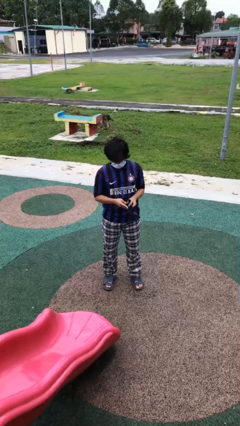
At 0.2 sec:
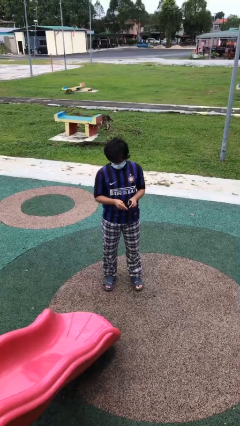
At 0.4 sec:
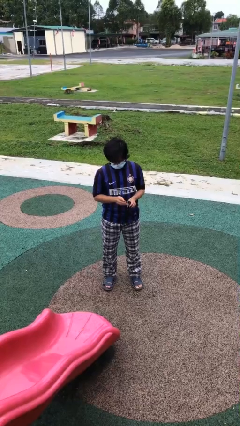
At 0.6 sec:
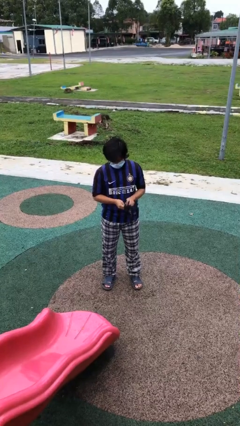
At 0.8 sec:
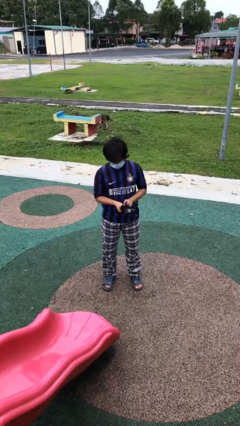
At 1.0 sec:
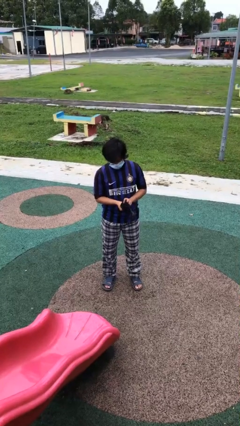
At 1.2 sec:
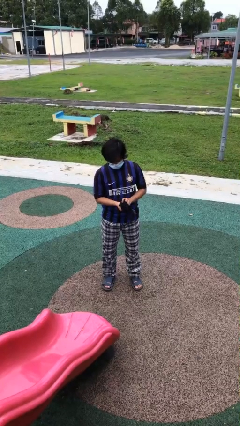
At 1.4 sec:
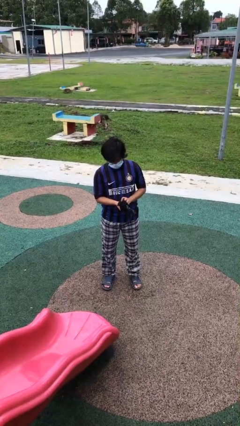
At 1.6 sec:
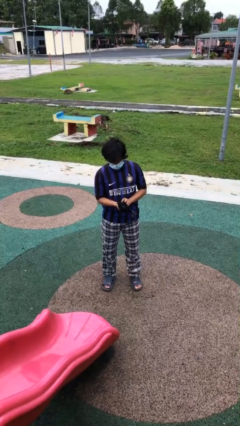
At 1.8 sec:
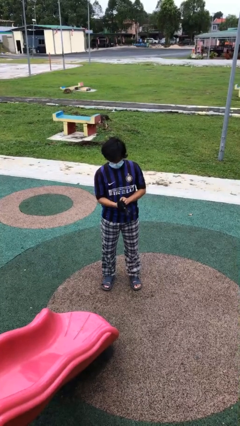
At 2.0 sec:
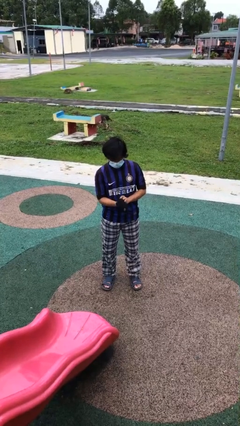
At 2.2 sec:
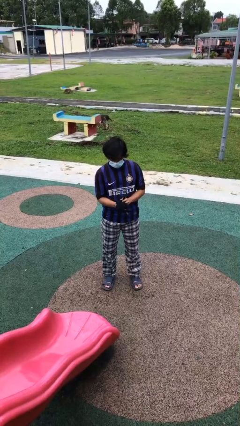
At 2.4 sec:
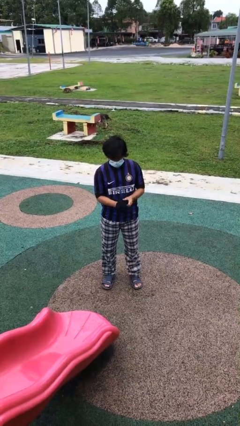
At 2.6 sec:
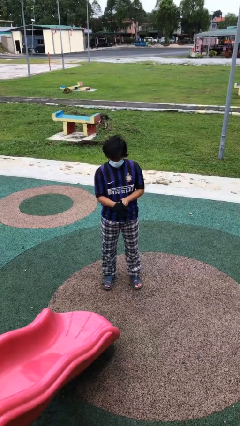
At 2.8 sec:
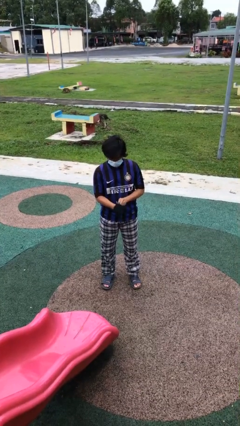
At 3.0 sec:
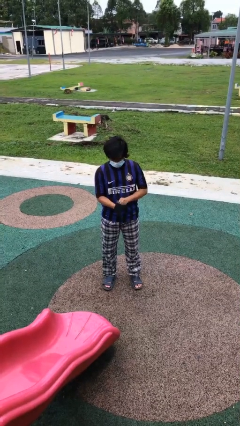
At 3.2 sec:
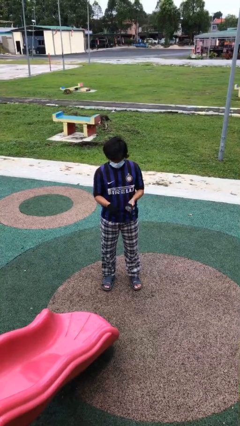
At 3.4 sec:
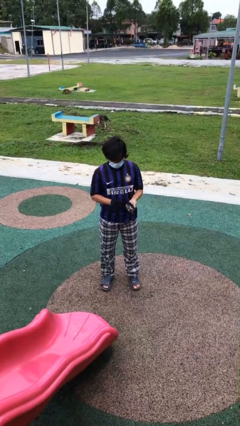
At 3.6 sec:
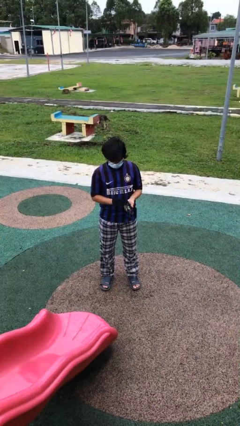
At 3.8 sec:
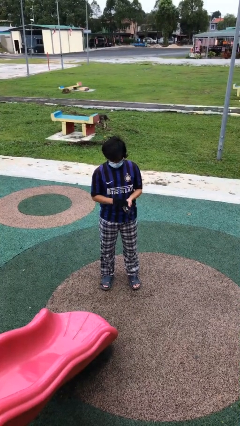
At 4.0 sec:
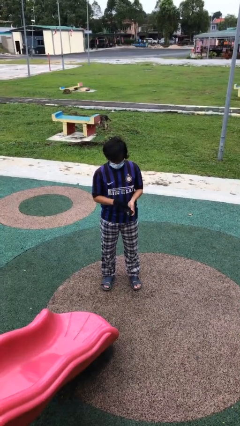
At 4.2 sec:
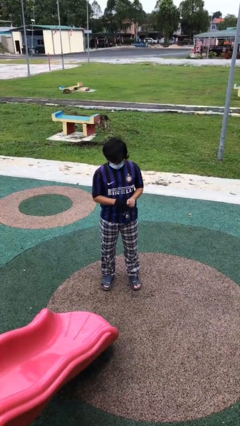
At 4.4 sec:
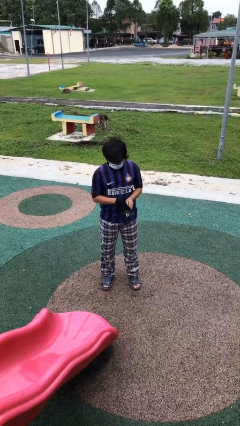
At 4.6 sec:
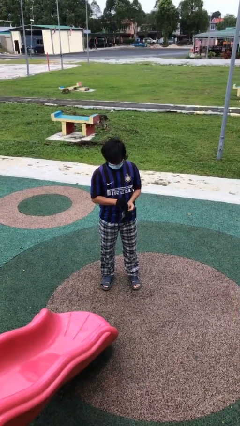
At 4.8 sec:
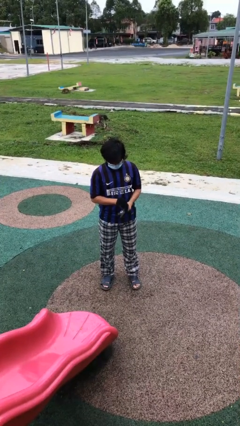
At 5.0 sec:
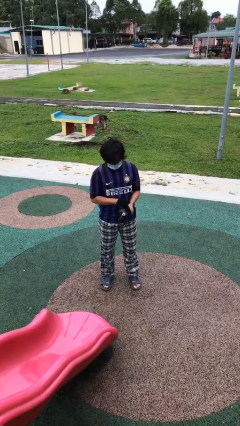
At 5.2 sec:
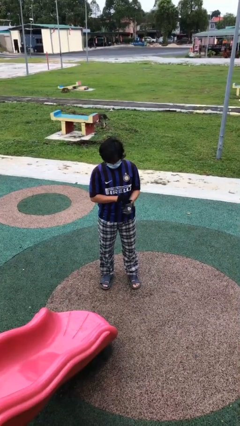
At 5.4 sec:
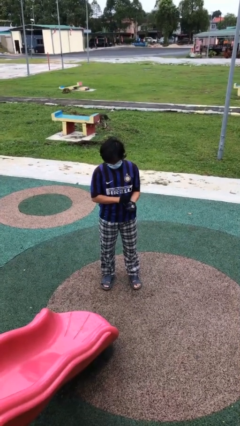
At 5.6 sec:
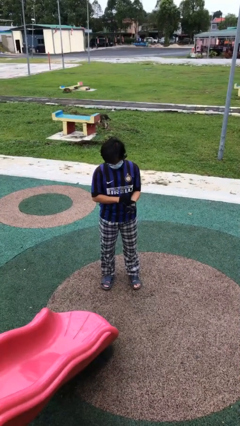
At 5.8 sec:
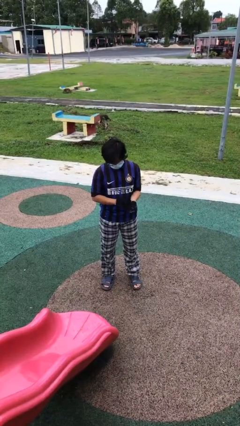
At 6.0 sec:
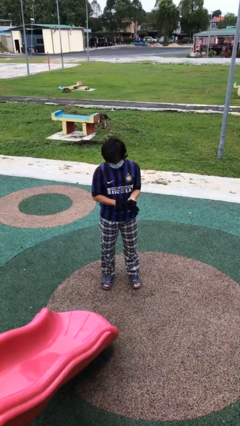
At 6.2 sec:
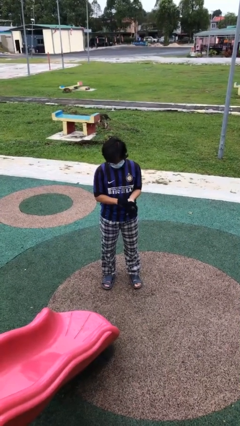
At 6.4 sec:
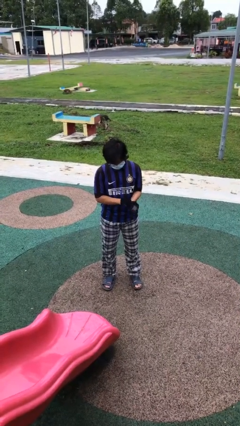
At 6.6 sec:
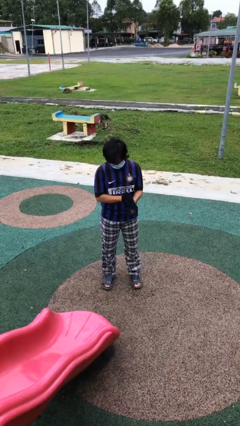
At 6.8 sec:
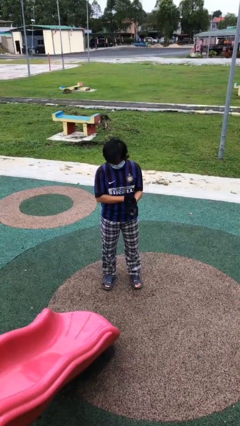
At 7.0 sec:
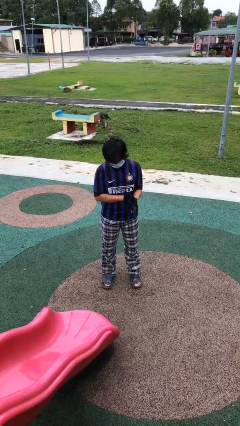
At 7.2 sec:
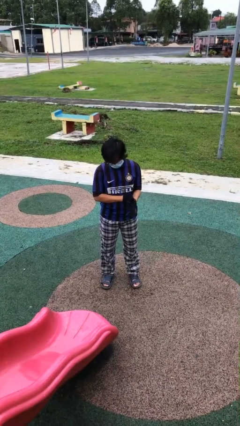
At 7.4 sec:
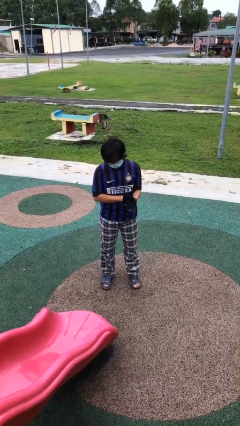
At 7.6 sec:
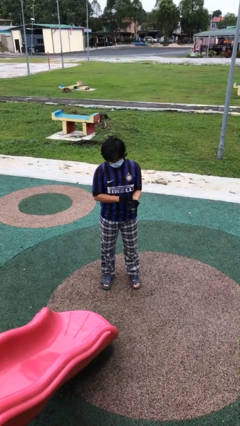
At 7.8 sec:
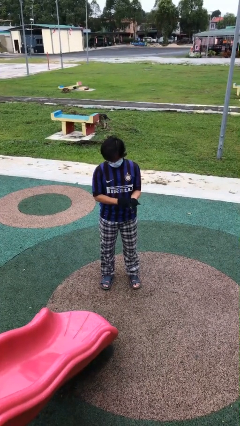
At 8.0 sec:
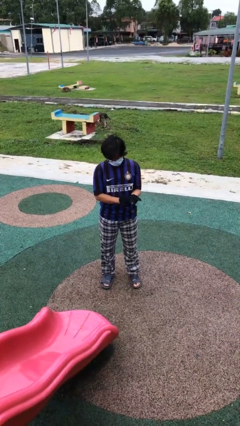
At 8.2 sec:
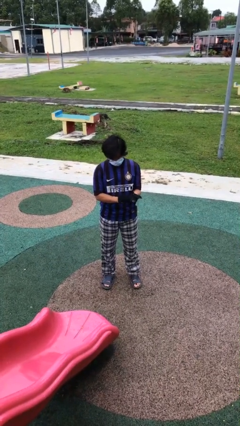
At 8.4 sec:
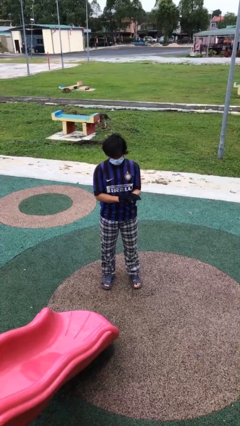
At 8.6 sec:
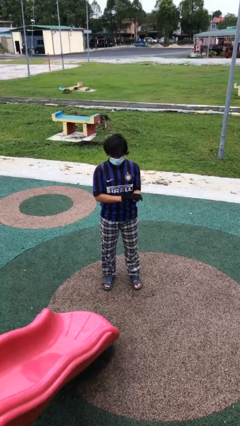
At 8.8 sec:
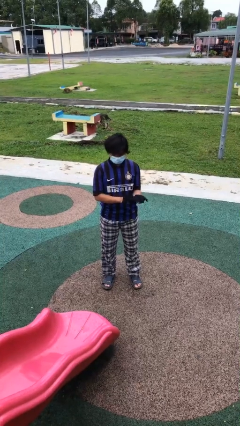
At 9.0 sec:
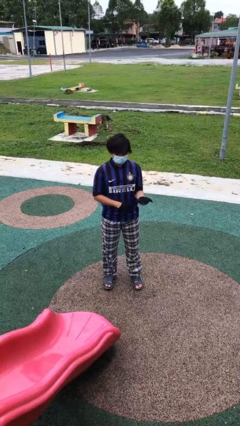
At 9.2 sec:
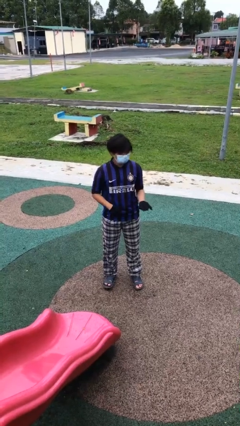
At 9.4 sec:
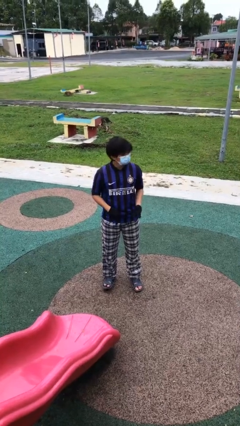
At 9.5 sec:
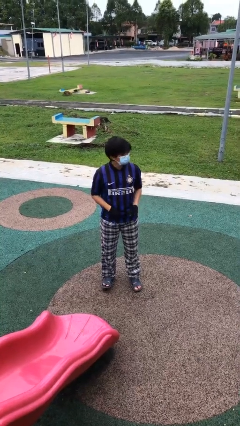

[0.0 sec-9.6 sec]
person puts on gloves

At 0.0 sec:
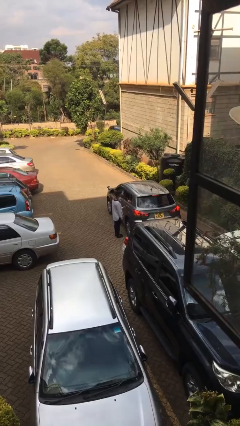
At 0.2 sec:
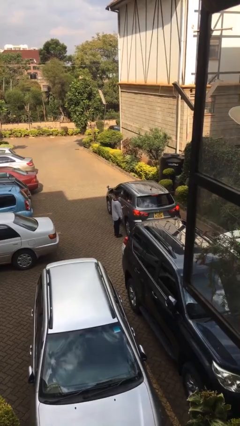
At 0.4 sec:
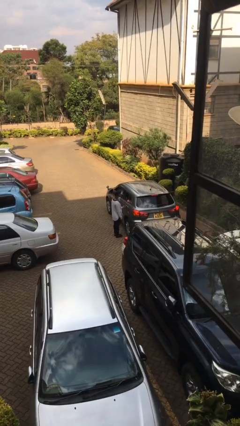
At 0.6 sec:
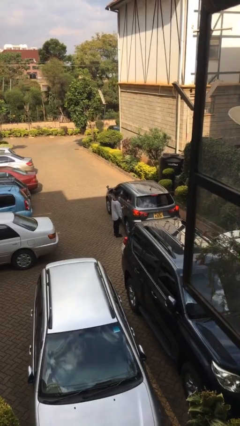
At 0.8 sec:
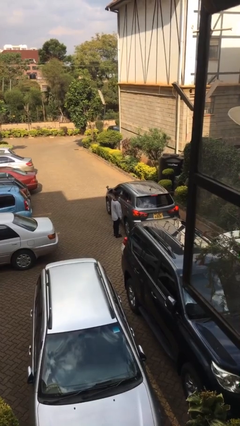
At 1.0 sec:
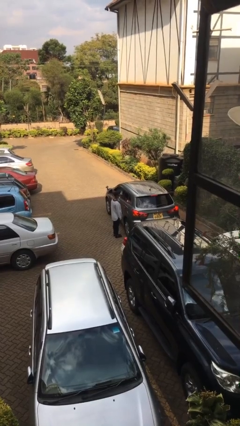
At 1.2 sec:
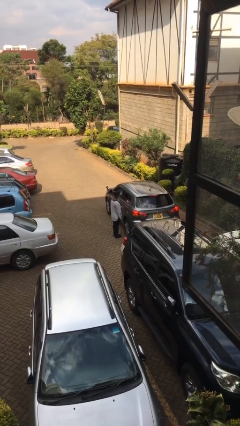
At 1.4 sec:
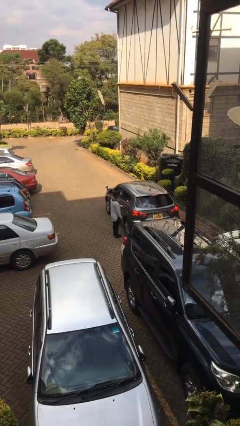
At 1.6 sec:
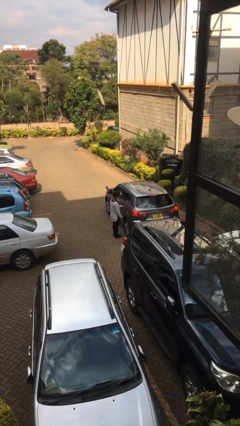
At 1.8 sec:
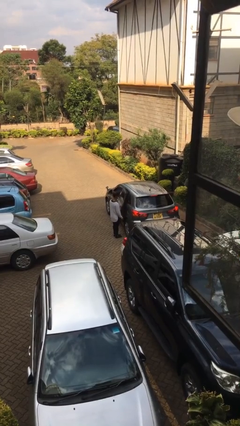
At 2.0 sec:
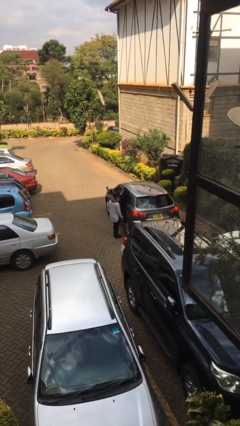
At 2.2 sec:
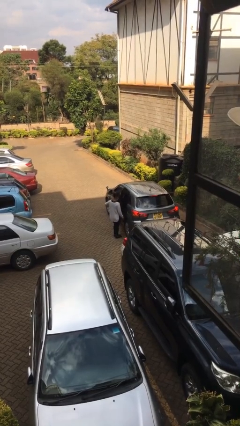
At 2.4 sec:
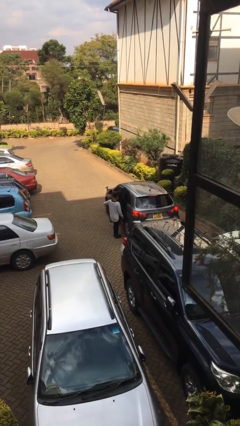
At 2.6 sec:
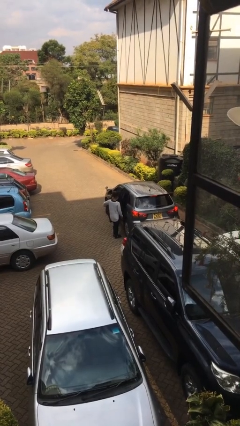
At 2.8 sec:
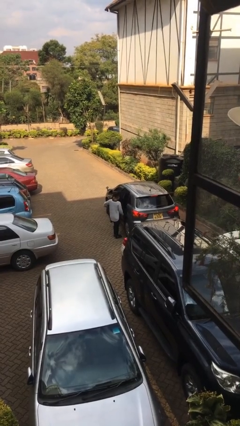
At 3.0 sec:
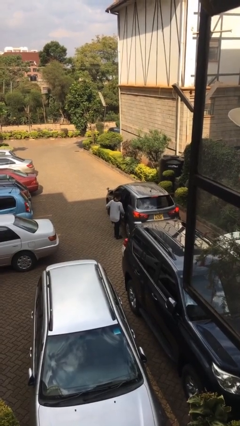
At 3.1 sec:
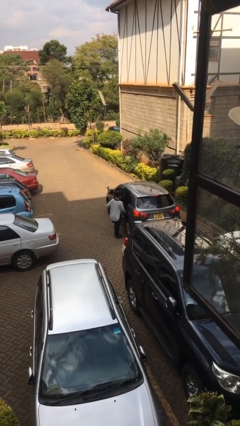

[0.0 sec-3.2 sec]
person opens car door

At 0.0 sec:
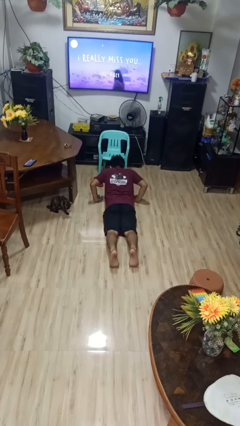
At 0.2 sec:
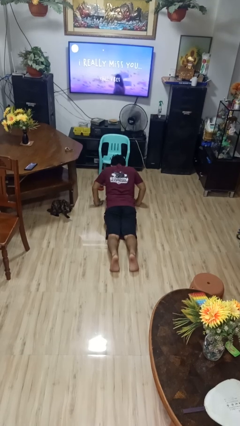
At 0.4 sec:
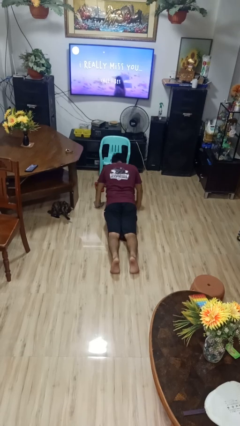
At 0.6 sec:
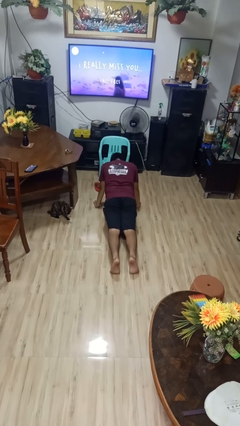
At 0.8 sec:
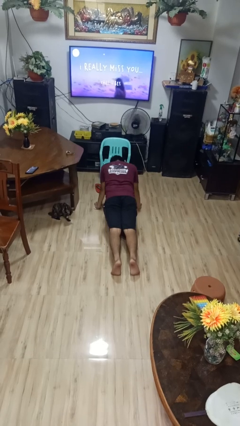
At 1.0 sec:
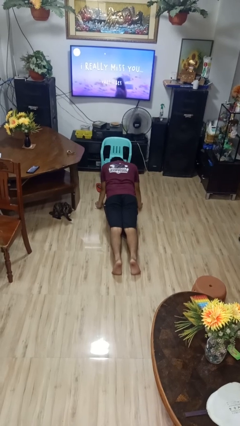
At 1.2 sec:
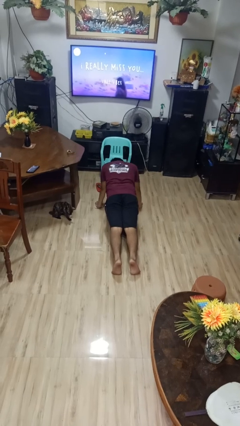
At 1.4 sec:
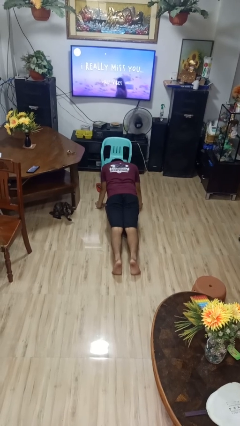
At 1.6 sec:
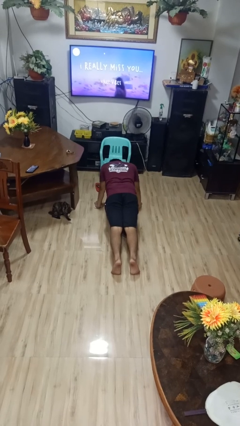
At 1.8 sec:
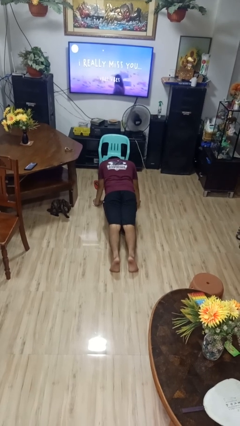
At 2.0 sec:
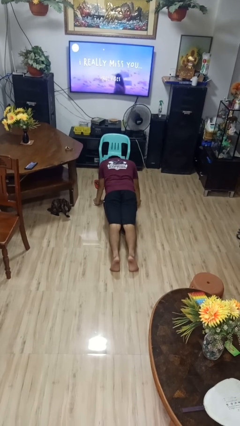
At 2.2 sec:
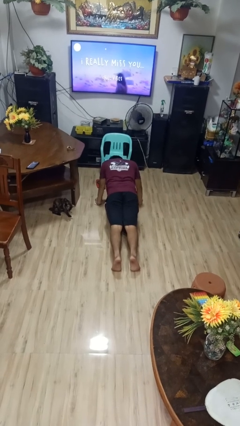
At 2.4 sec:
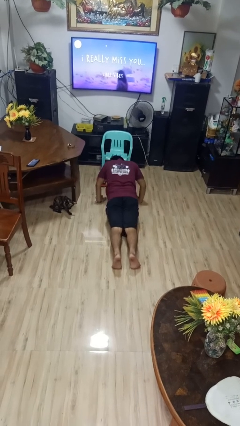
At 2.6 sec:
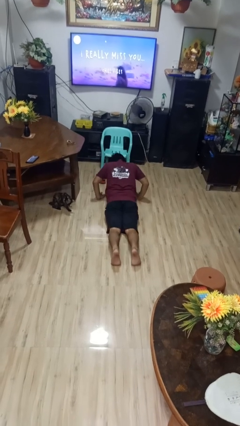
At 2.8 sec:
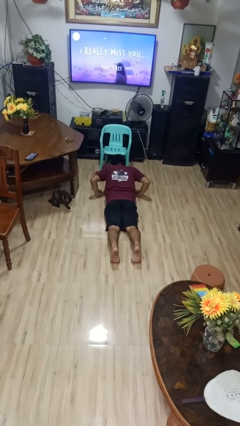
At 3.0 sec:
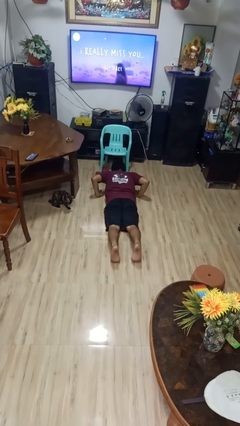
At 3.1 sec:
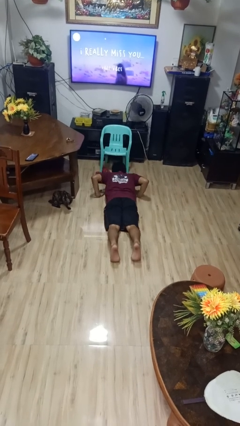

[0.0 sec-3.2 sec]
person exercises with pushup

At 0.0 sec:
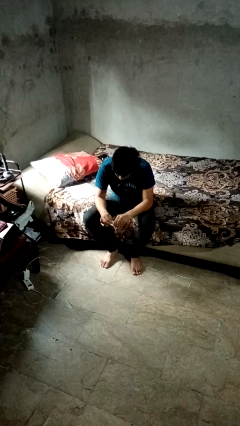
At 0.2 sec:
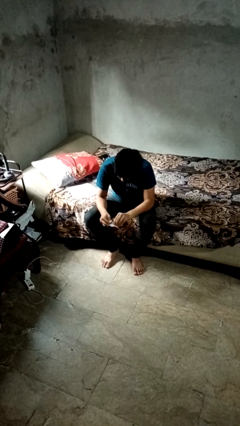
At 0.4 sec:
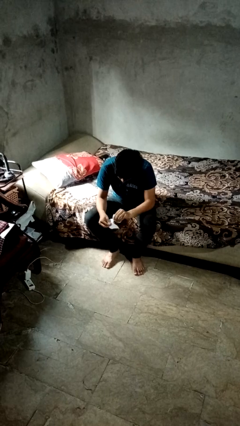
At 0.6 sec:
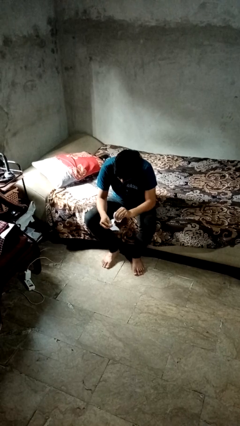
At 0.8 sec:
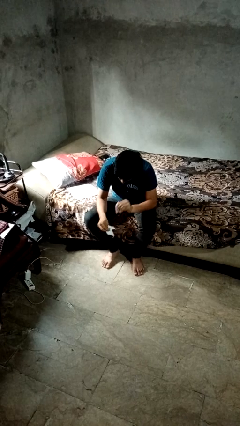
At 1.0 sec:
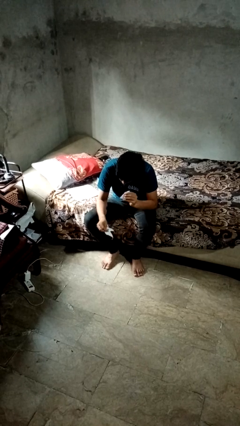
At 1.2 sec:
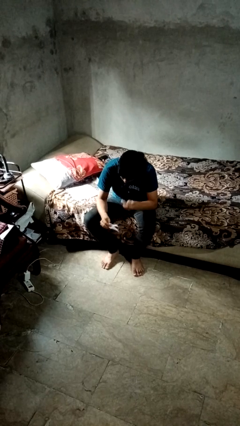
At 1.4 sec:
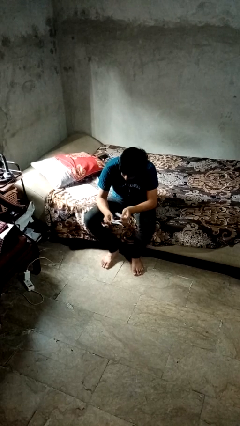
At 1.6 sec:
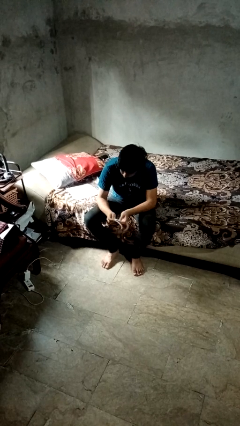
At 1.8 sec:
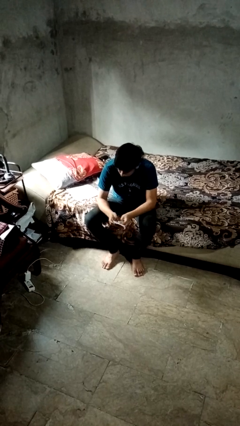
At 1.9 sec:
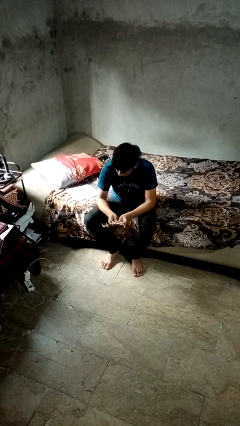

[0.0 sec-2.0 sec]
person tears paper
